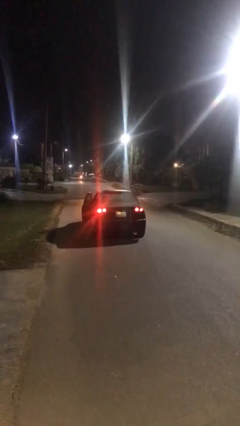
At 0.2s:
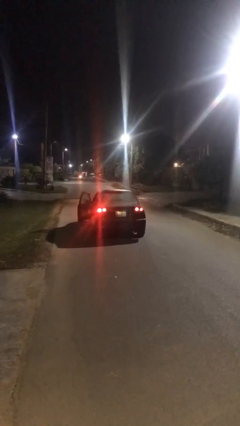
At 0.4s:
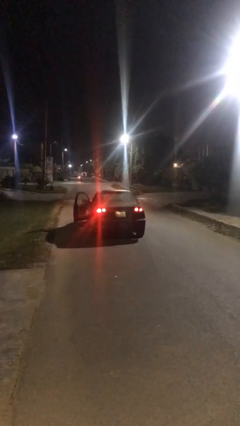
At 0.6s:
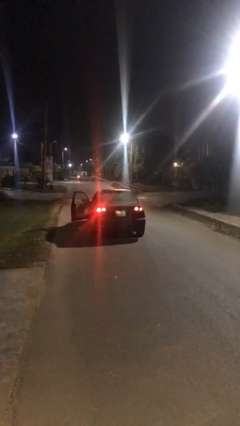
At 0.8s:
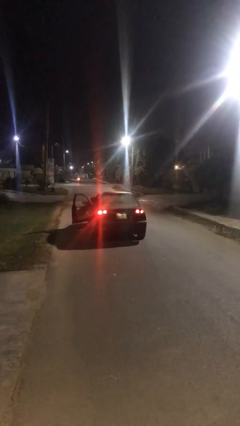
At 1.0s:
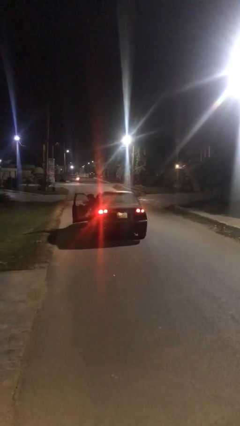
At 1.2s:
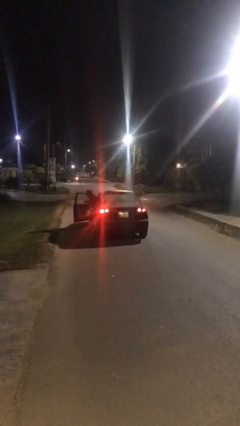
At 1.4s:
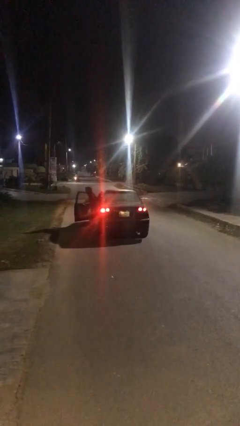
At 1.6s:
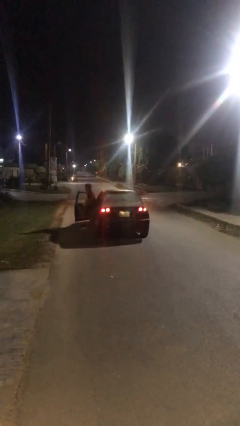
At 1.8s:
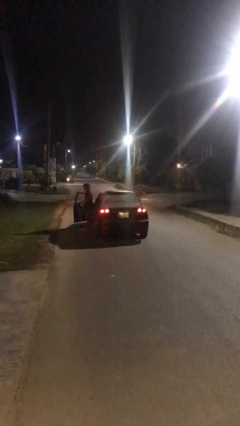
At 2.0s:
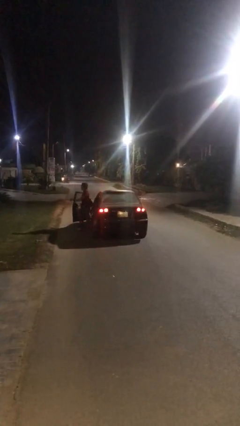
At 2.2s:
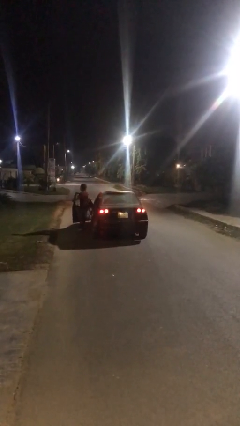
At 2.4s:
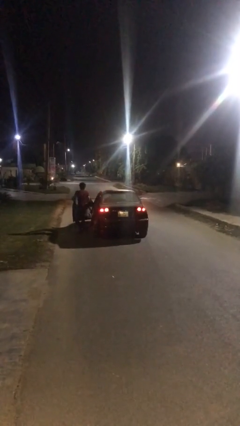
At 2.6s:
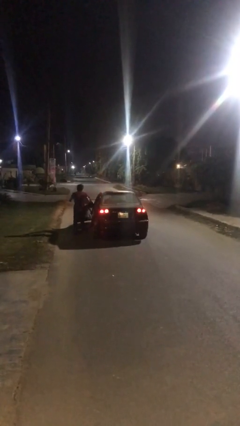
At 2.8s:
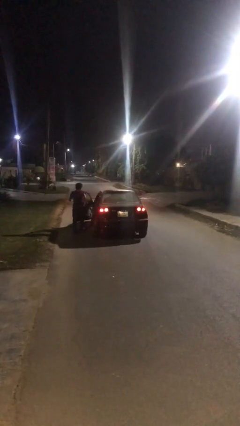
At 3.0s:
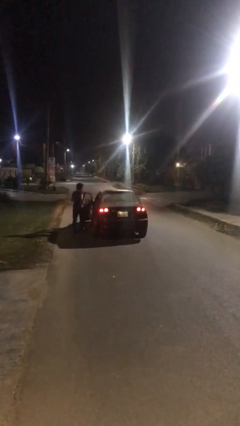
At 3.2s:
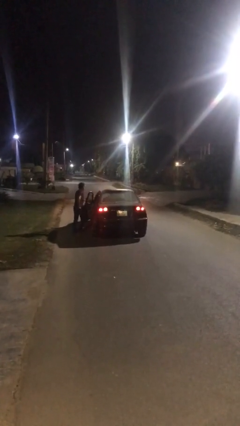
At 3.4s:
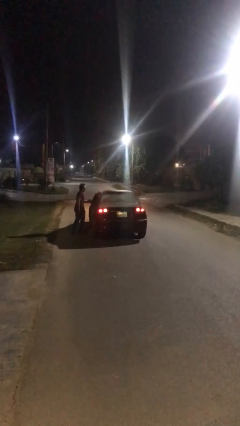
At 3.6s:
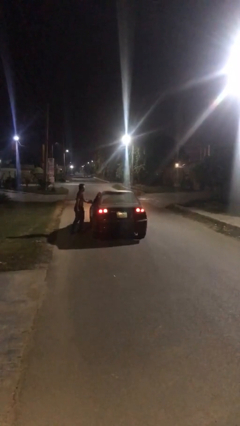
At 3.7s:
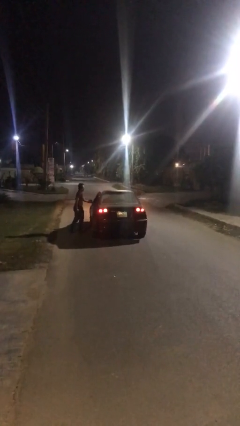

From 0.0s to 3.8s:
car drops off person

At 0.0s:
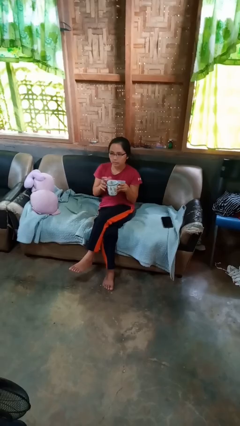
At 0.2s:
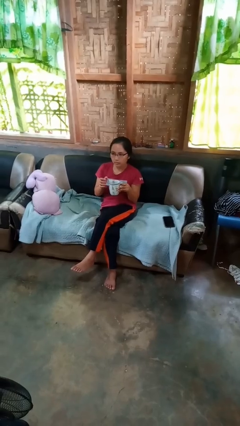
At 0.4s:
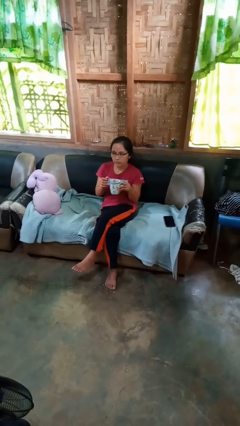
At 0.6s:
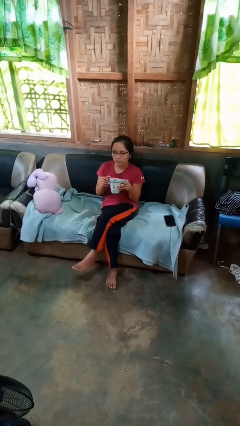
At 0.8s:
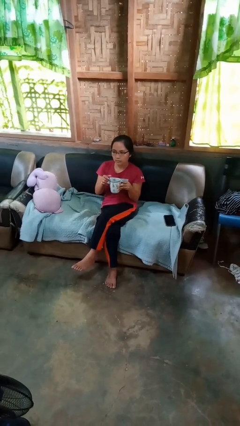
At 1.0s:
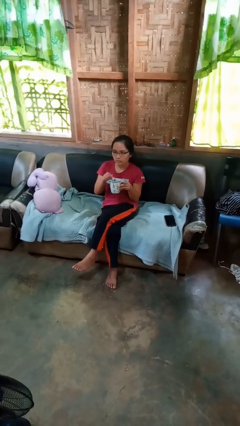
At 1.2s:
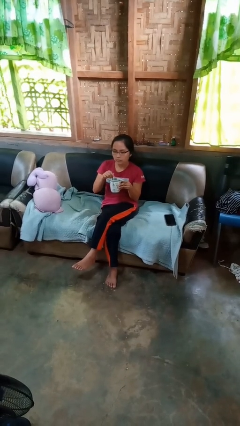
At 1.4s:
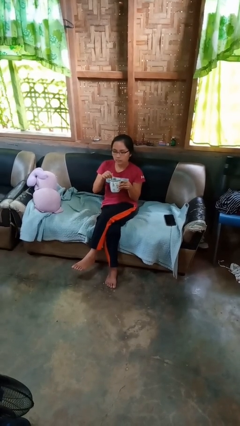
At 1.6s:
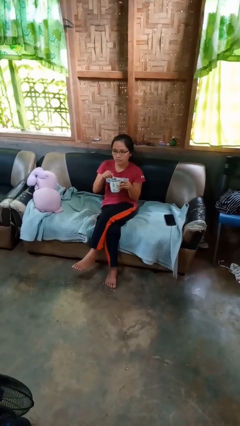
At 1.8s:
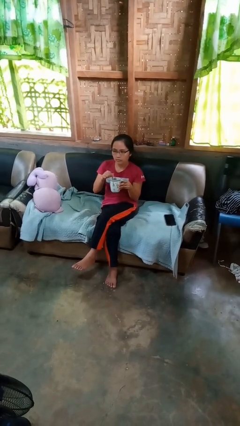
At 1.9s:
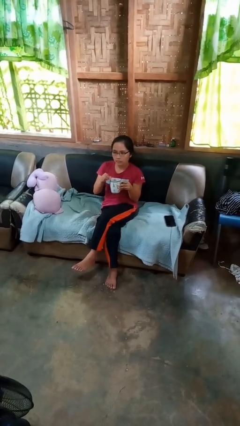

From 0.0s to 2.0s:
person stirs mug

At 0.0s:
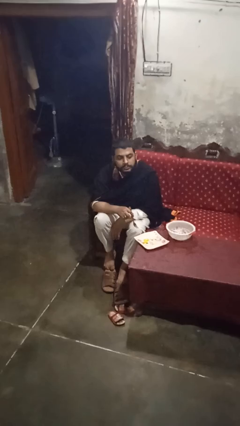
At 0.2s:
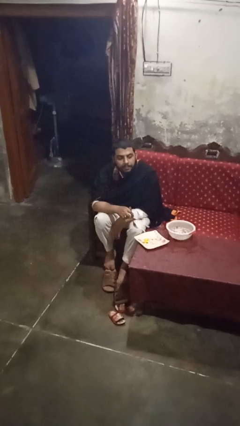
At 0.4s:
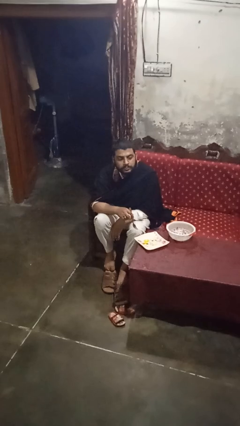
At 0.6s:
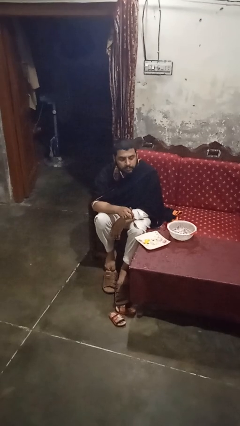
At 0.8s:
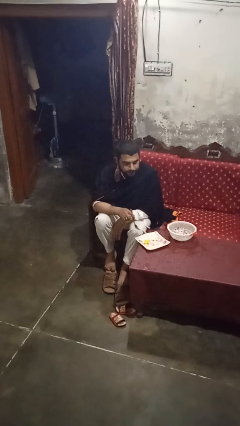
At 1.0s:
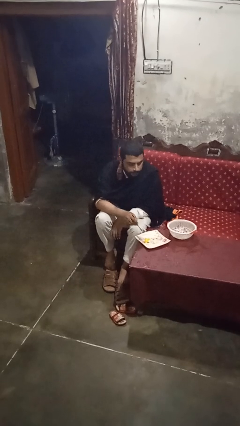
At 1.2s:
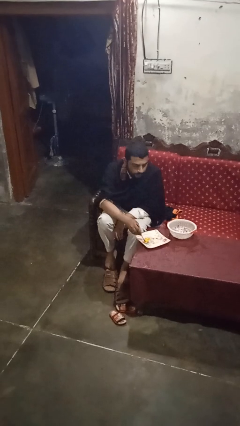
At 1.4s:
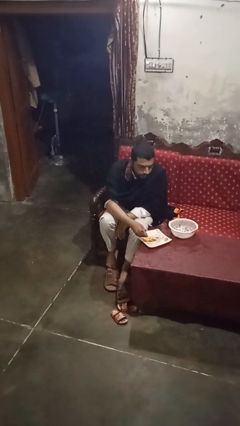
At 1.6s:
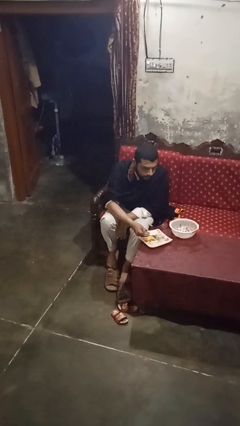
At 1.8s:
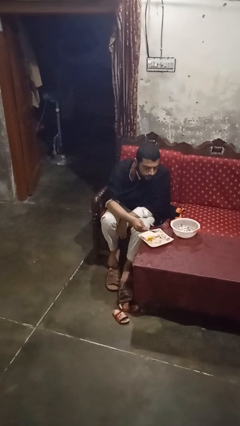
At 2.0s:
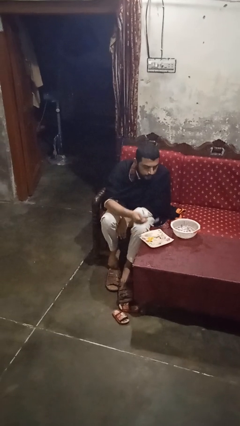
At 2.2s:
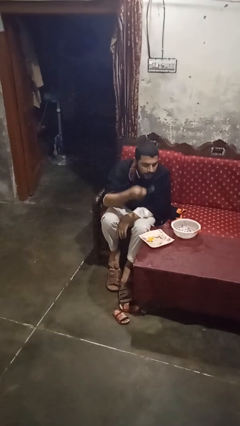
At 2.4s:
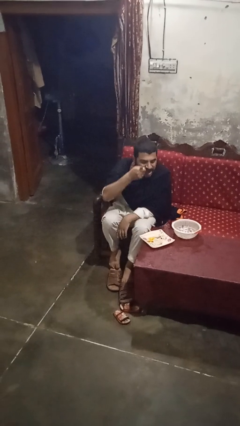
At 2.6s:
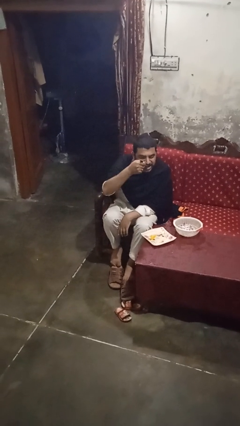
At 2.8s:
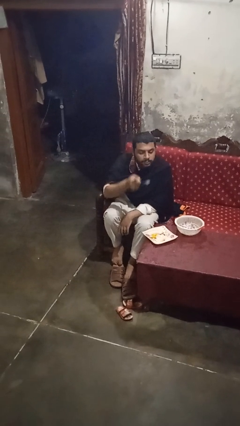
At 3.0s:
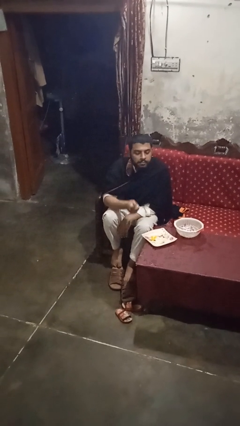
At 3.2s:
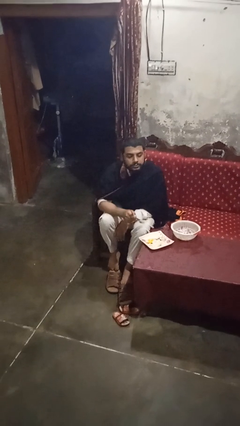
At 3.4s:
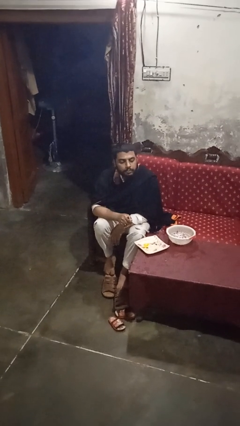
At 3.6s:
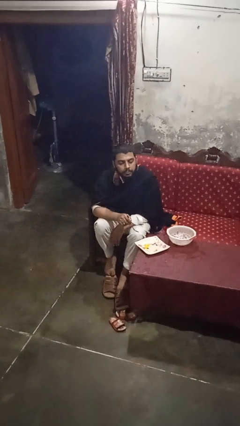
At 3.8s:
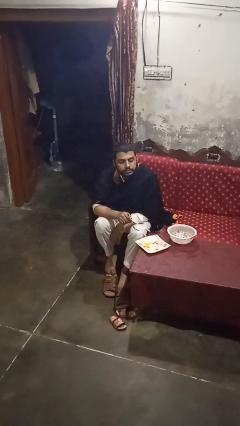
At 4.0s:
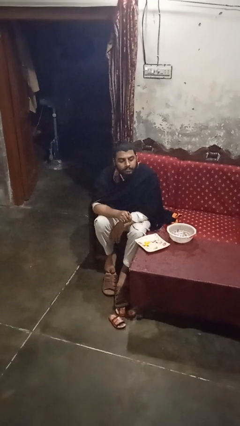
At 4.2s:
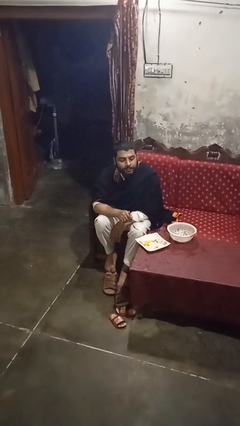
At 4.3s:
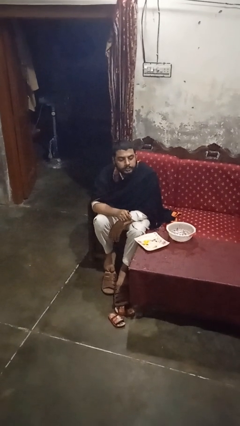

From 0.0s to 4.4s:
person eats with utensil

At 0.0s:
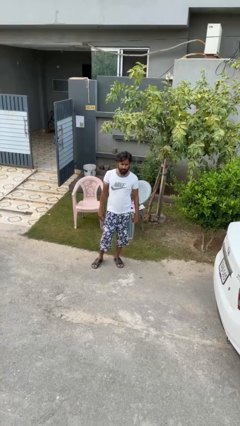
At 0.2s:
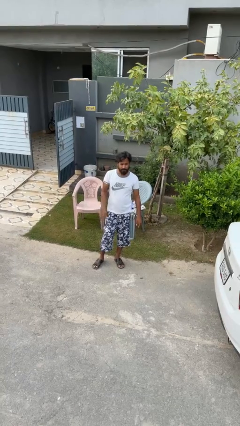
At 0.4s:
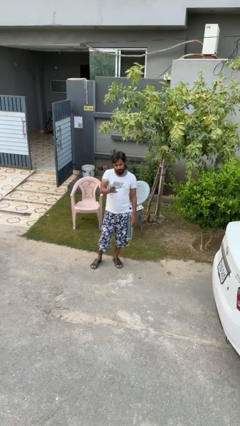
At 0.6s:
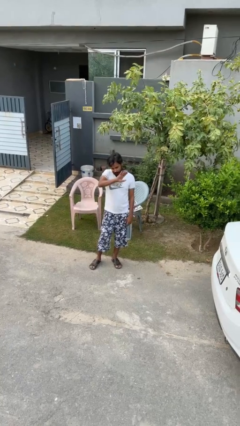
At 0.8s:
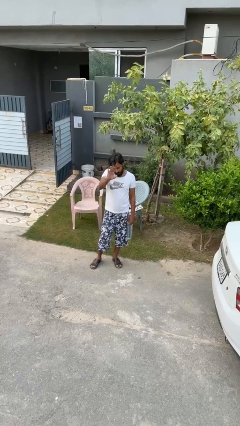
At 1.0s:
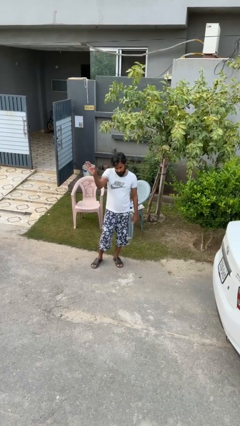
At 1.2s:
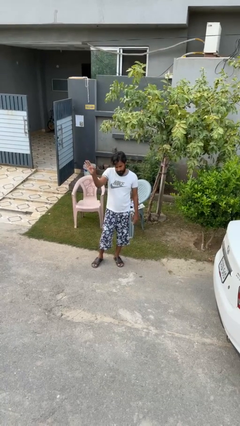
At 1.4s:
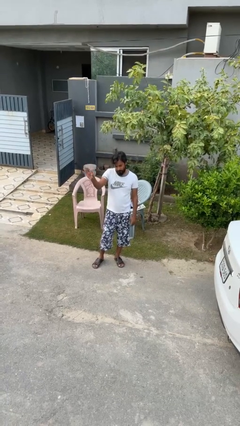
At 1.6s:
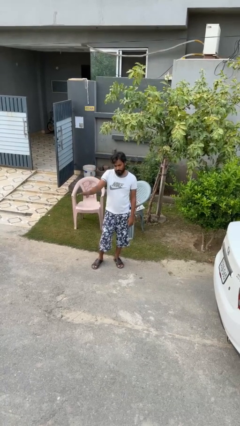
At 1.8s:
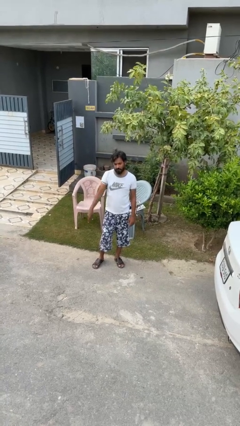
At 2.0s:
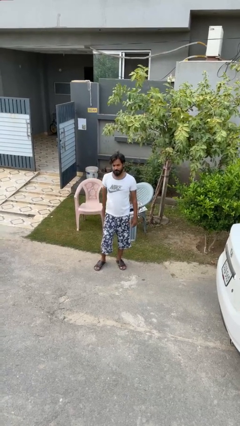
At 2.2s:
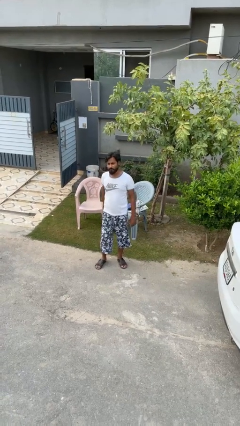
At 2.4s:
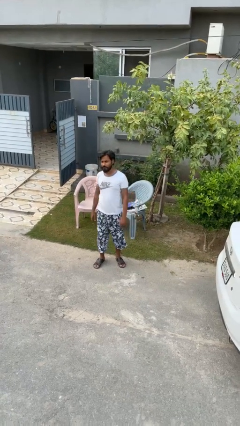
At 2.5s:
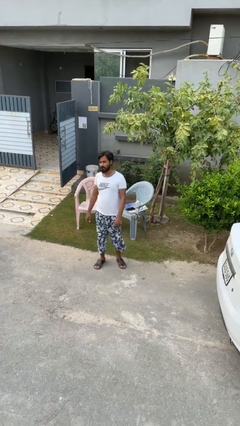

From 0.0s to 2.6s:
person gestures swipe right

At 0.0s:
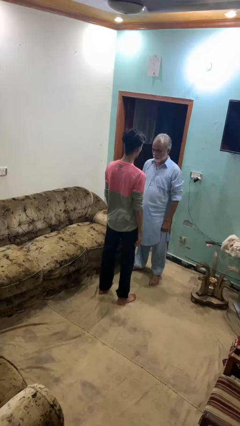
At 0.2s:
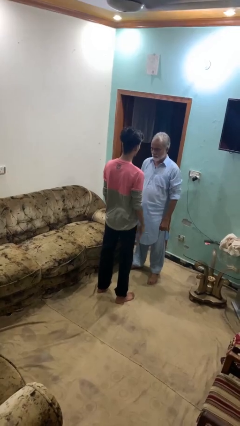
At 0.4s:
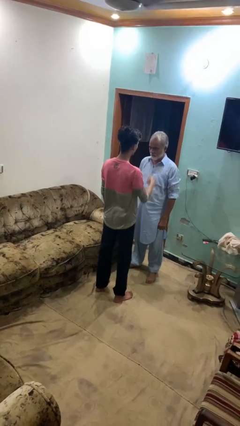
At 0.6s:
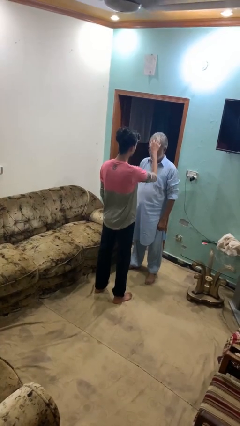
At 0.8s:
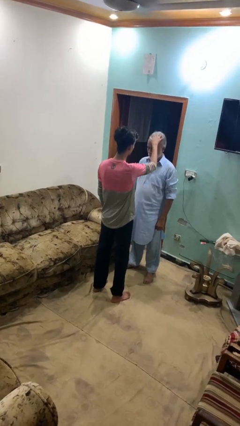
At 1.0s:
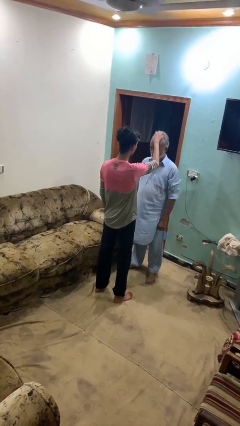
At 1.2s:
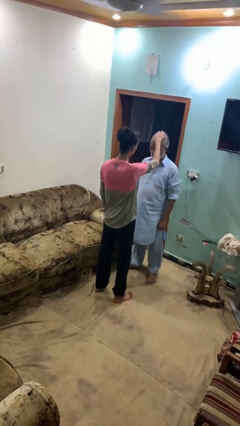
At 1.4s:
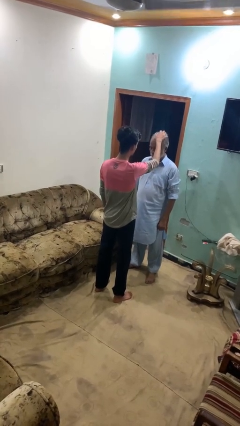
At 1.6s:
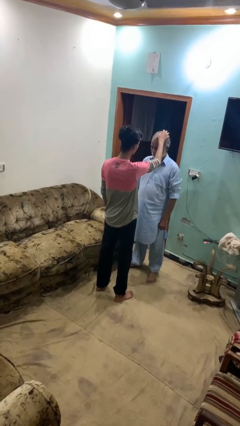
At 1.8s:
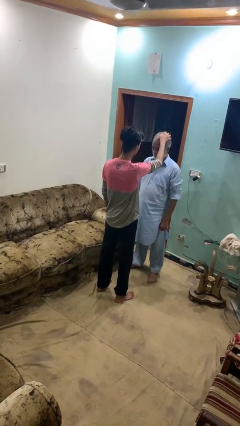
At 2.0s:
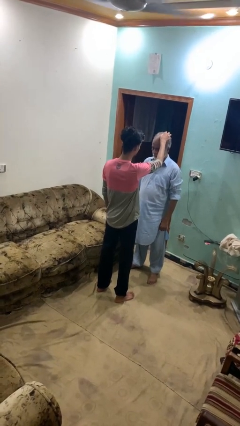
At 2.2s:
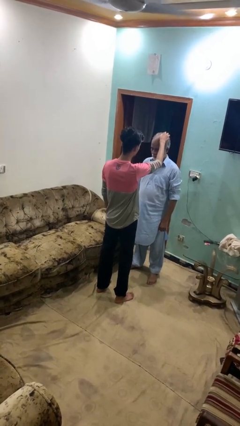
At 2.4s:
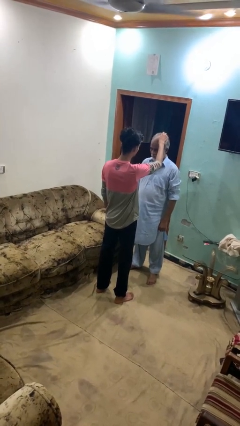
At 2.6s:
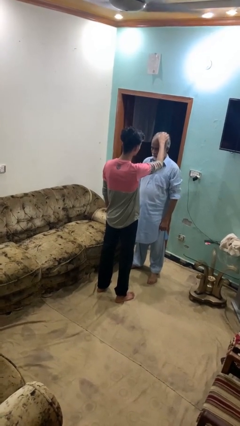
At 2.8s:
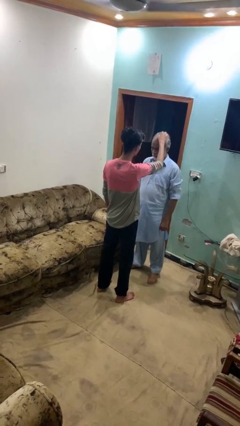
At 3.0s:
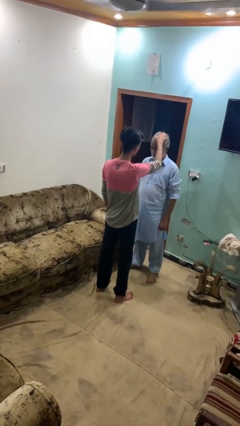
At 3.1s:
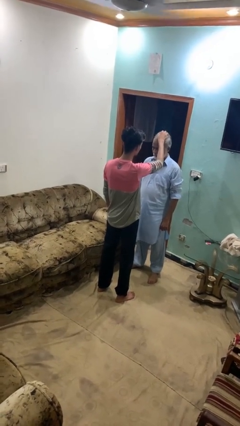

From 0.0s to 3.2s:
person grabs person by hair

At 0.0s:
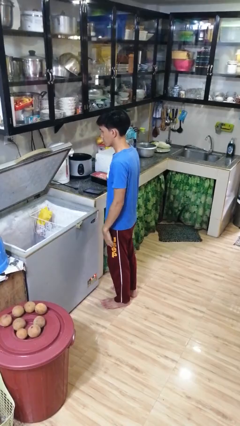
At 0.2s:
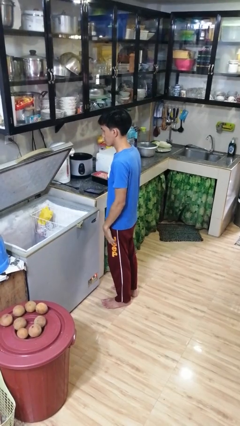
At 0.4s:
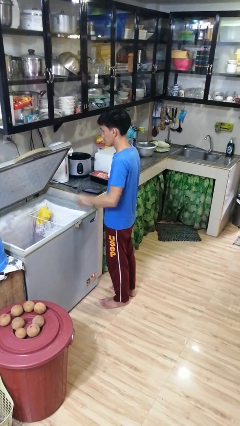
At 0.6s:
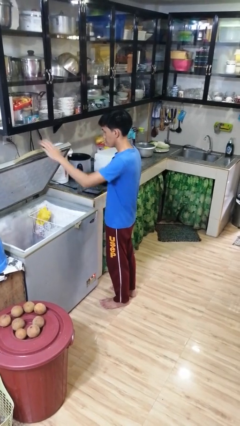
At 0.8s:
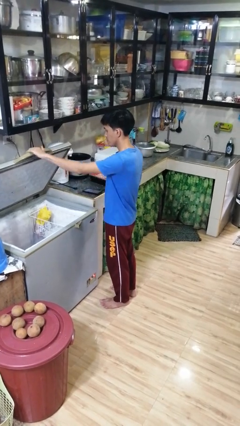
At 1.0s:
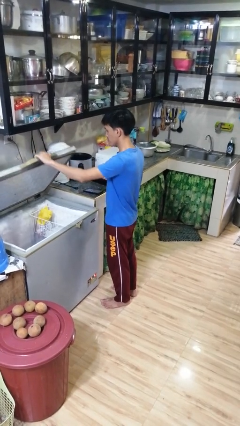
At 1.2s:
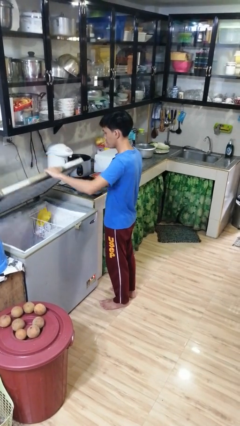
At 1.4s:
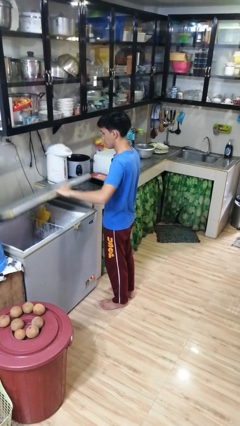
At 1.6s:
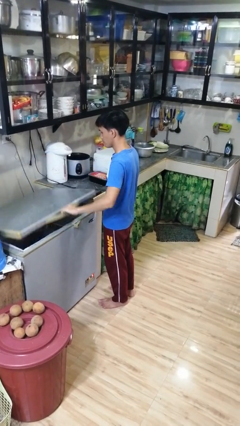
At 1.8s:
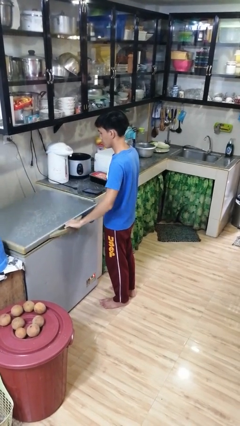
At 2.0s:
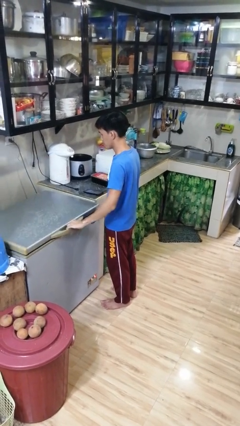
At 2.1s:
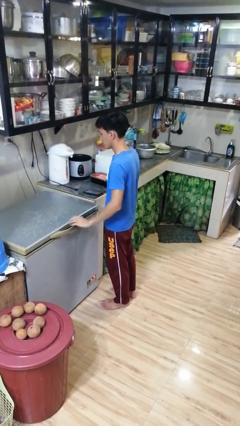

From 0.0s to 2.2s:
person closes refrigerator
